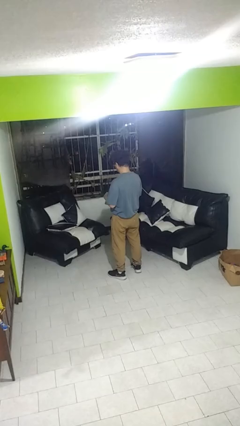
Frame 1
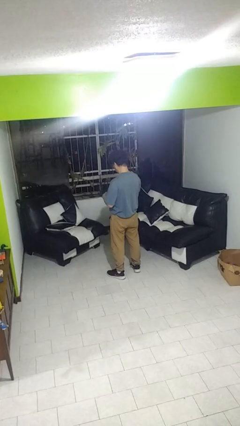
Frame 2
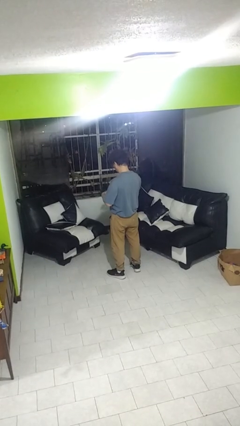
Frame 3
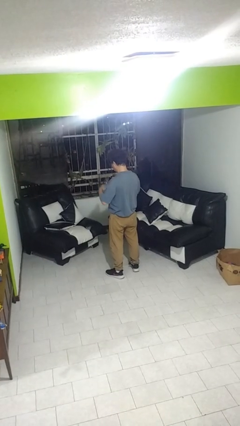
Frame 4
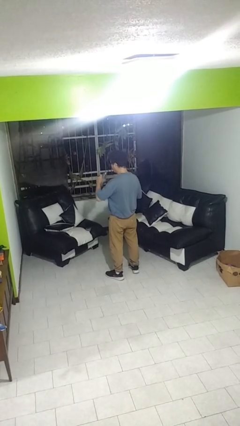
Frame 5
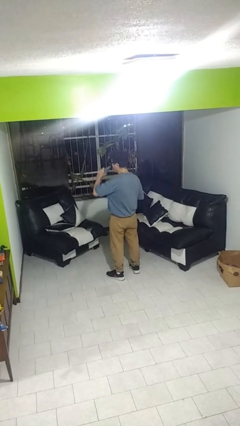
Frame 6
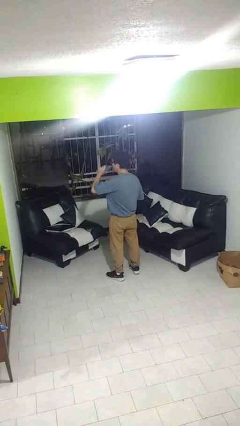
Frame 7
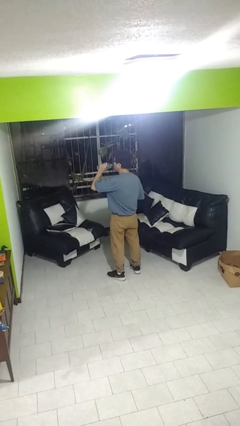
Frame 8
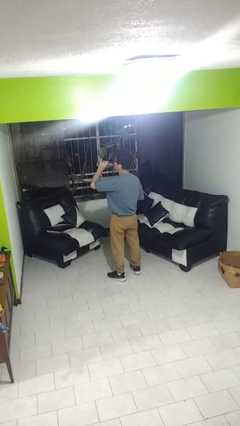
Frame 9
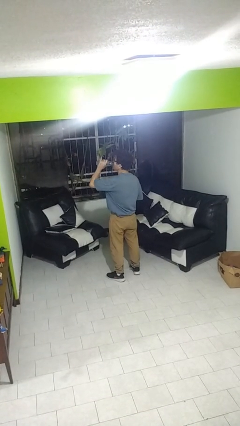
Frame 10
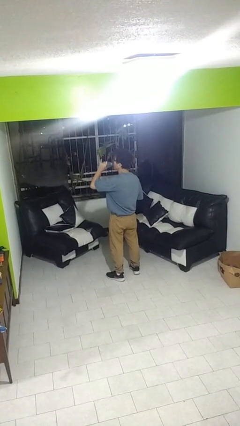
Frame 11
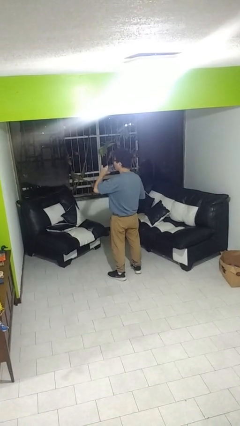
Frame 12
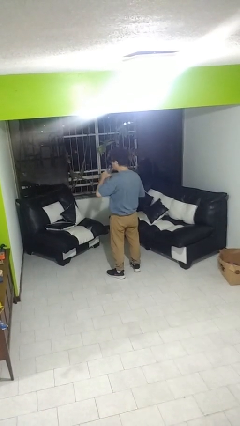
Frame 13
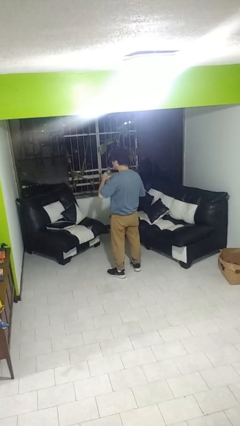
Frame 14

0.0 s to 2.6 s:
person drinks from bottle

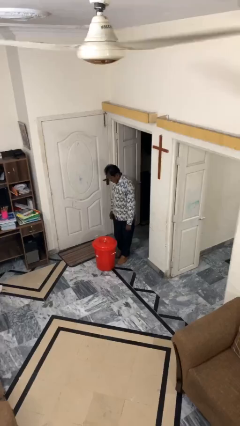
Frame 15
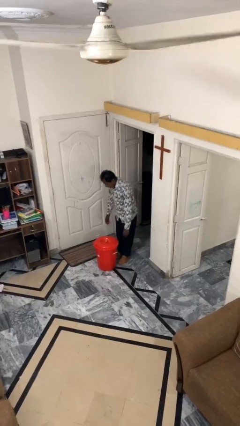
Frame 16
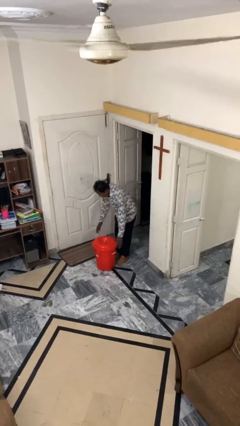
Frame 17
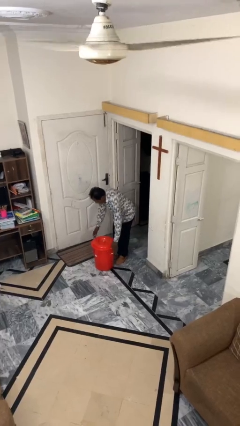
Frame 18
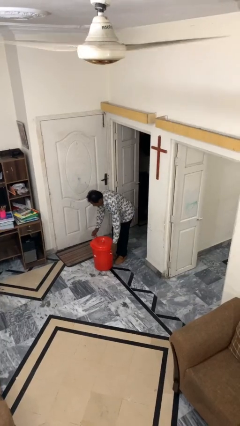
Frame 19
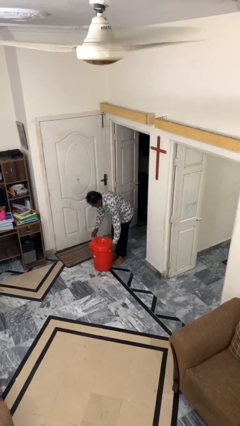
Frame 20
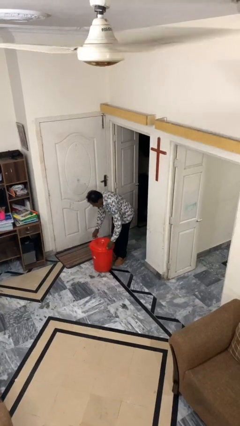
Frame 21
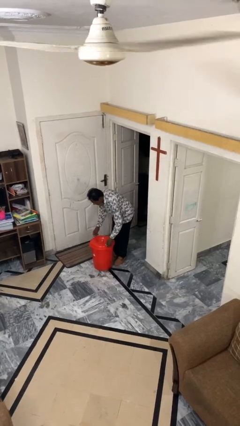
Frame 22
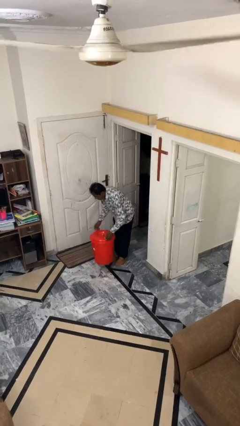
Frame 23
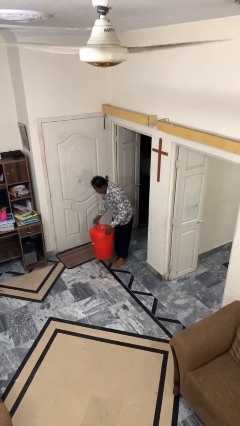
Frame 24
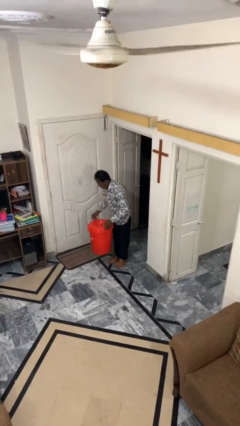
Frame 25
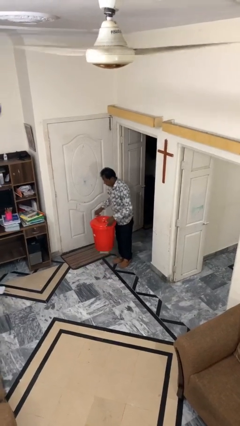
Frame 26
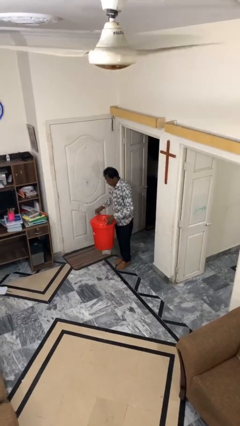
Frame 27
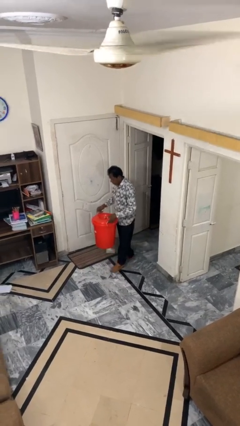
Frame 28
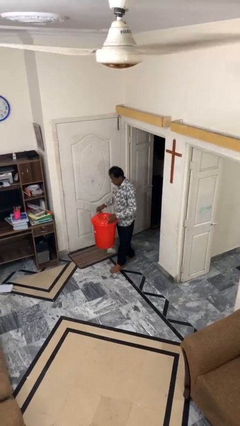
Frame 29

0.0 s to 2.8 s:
person picks up object from floor

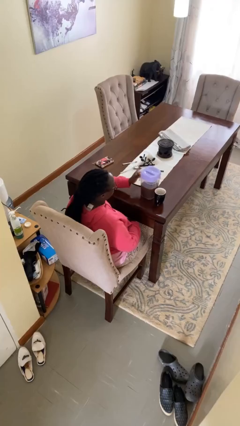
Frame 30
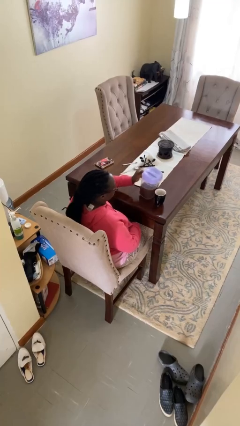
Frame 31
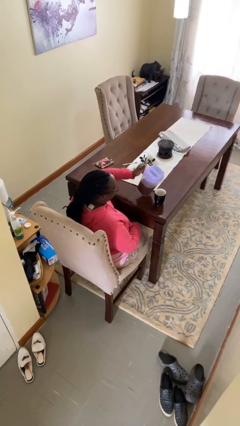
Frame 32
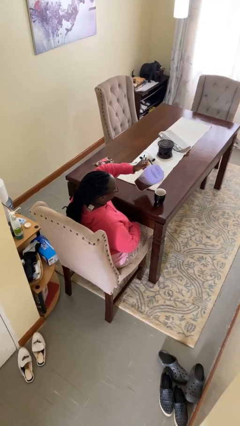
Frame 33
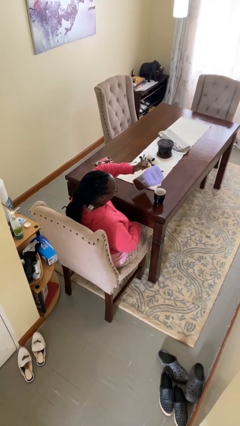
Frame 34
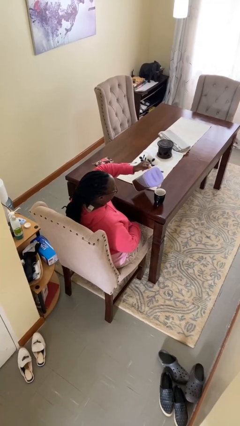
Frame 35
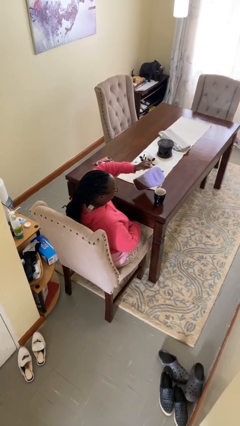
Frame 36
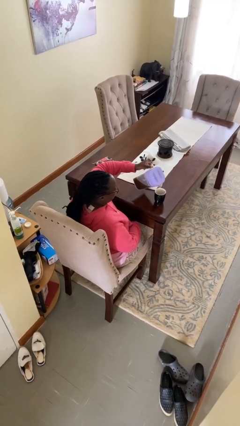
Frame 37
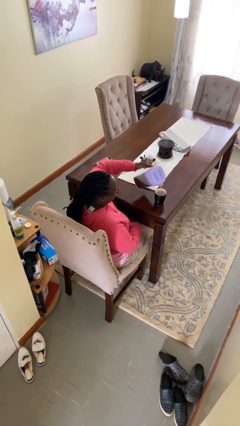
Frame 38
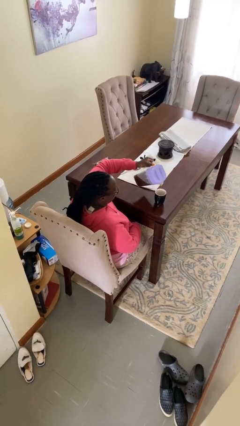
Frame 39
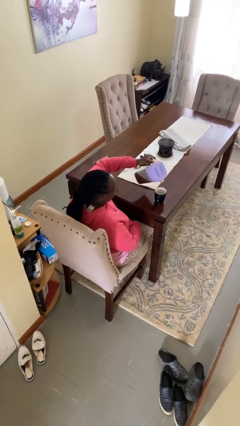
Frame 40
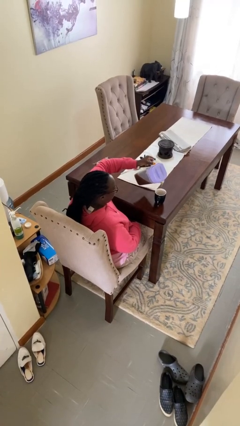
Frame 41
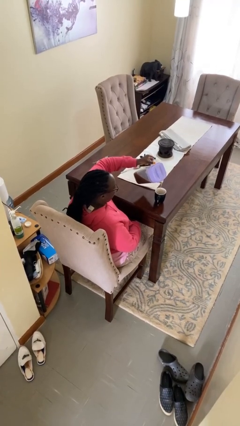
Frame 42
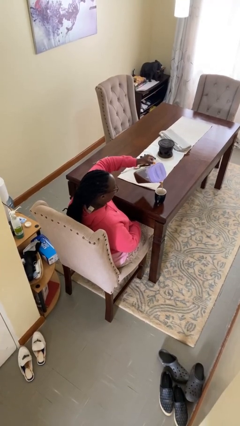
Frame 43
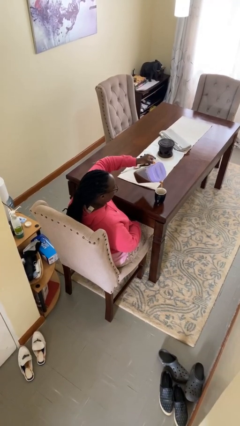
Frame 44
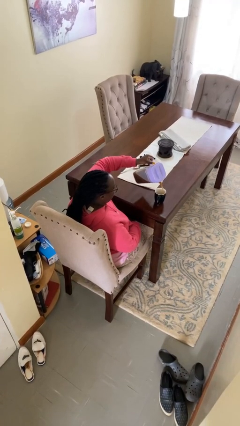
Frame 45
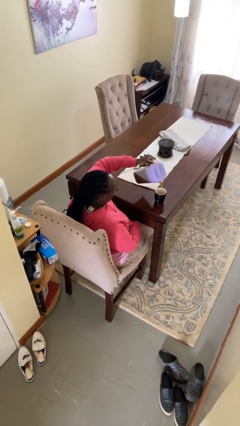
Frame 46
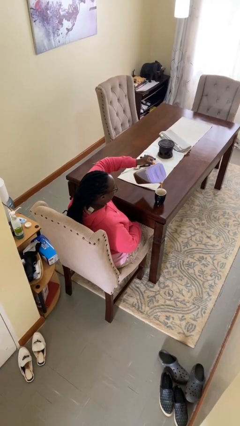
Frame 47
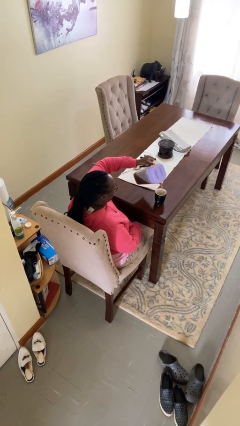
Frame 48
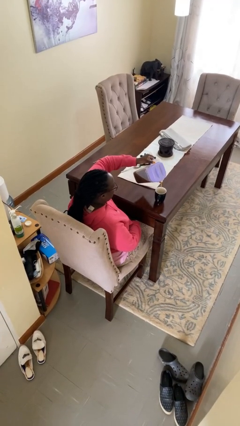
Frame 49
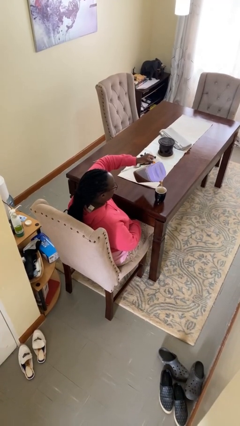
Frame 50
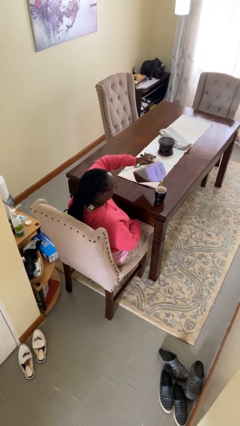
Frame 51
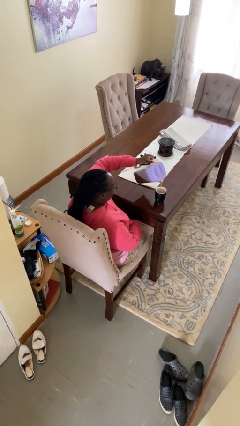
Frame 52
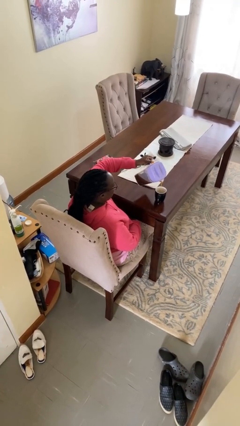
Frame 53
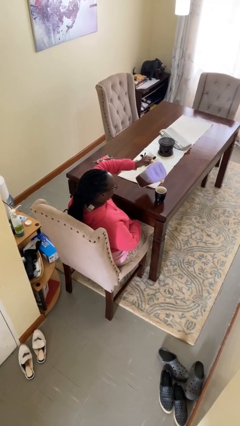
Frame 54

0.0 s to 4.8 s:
person pours coffee into mug

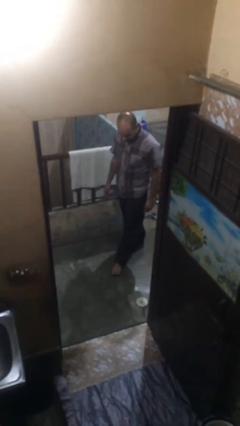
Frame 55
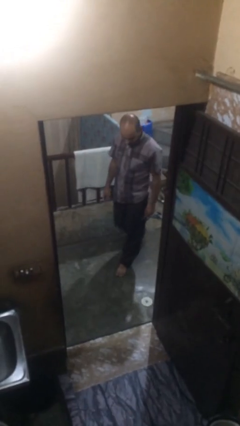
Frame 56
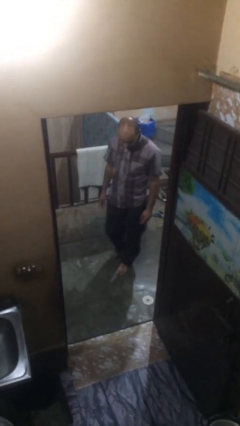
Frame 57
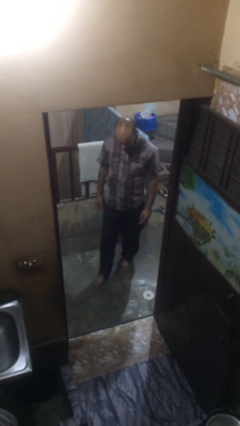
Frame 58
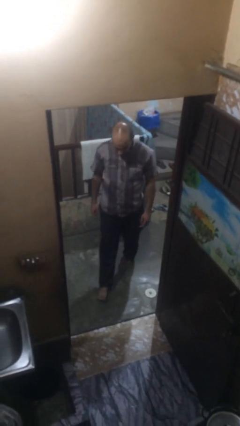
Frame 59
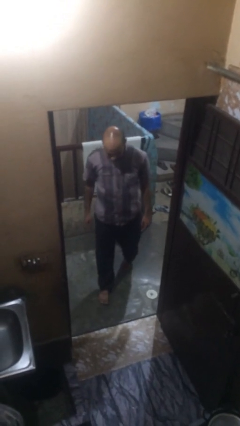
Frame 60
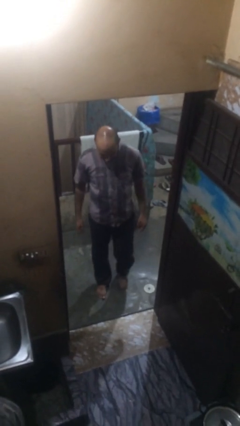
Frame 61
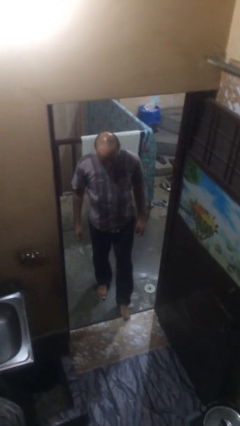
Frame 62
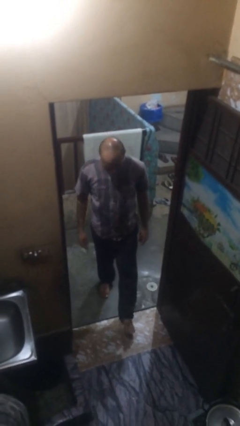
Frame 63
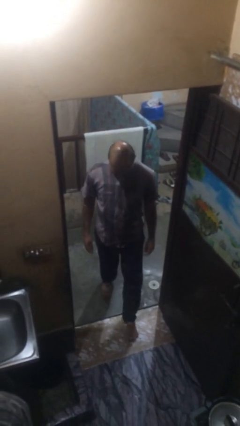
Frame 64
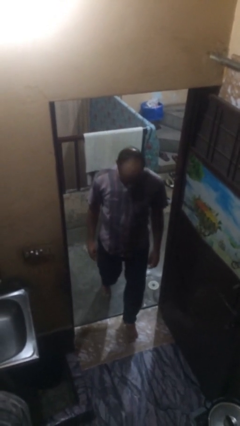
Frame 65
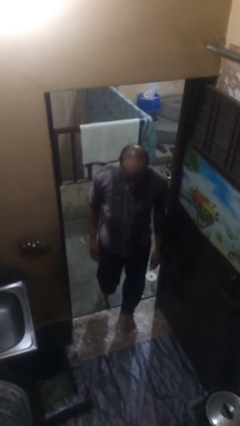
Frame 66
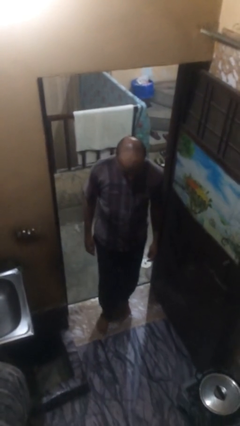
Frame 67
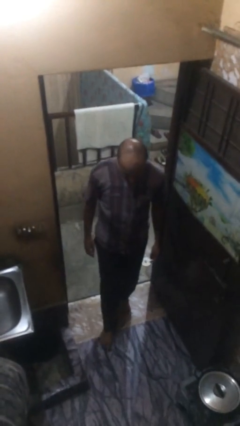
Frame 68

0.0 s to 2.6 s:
person enters scene through structure

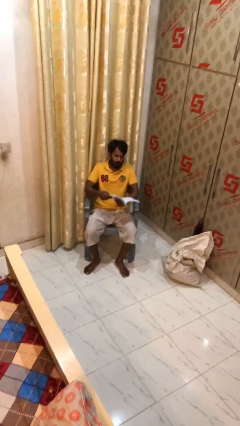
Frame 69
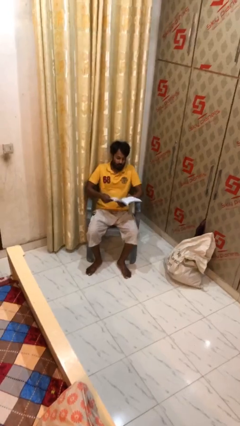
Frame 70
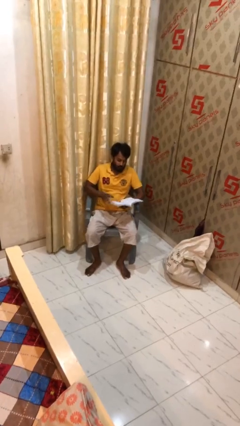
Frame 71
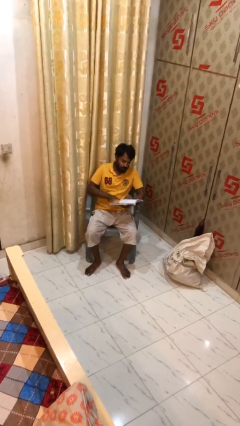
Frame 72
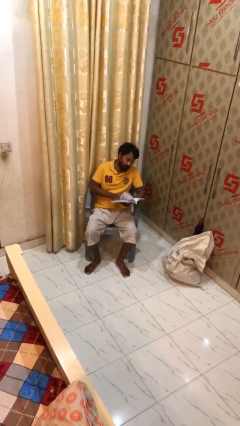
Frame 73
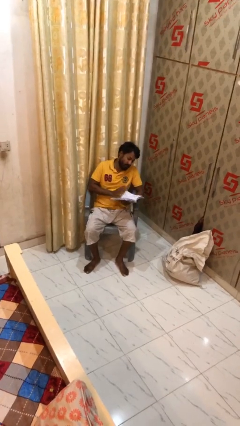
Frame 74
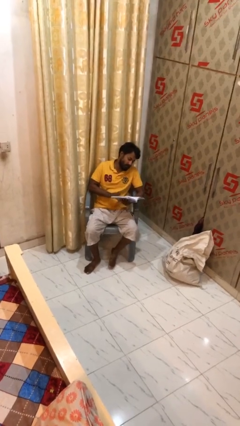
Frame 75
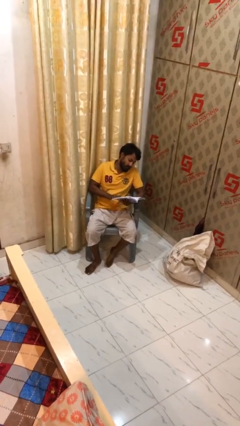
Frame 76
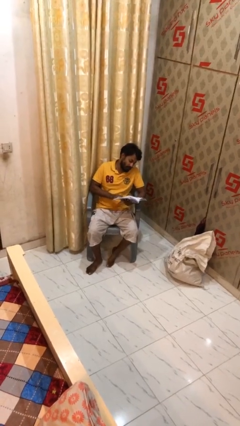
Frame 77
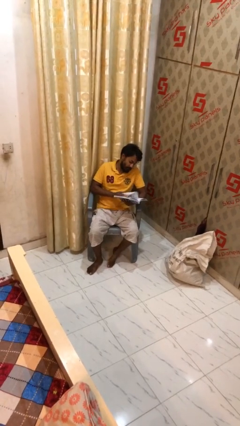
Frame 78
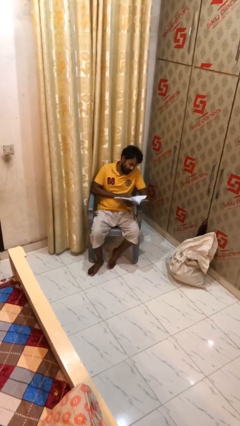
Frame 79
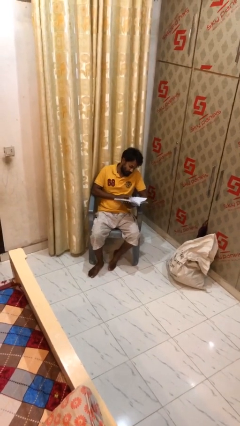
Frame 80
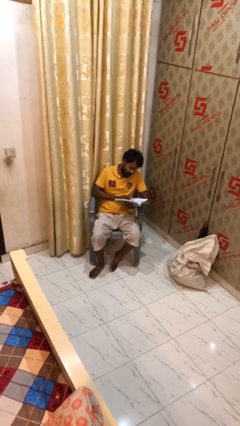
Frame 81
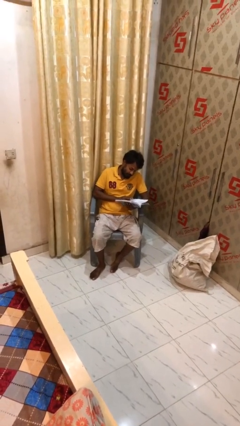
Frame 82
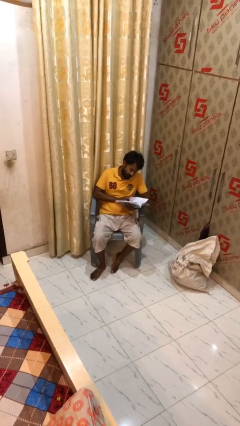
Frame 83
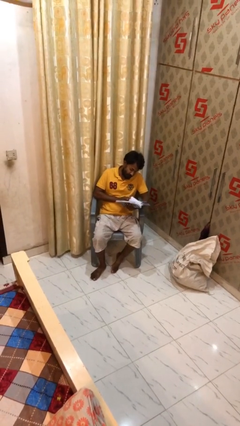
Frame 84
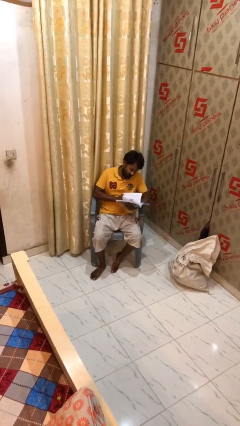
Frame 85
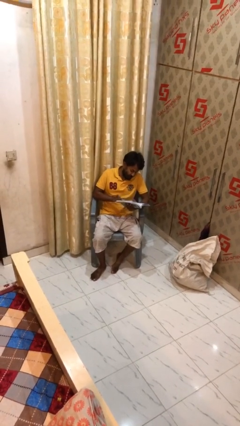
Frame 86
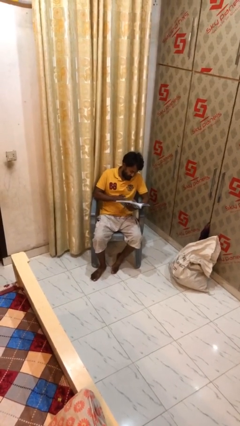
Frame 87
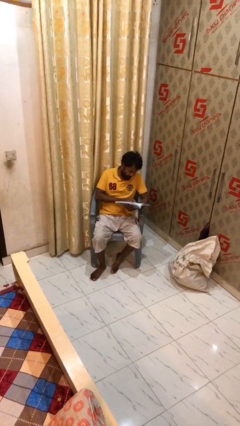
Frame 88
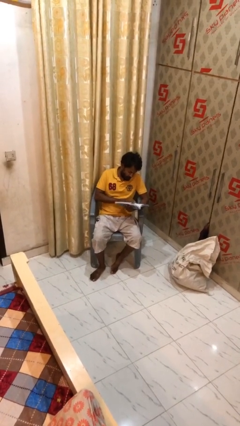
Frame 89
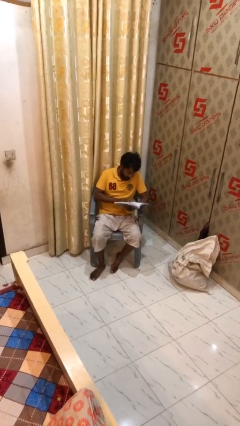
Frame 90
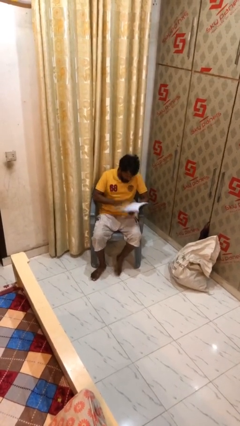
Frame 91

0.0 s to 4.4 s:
person reads document

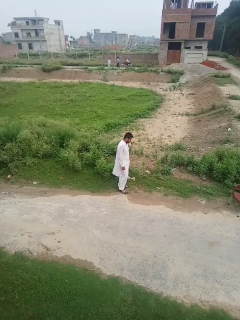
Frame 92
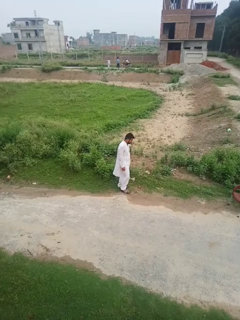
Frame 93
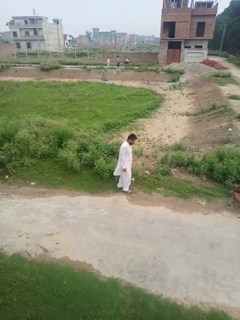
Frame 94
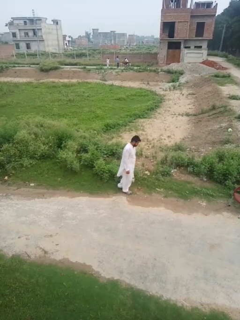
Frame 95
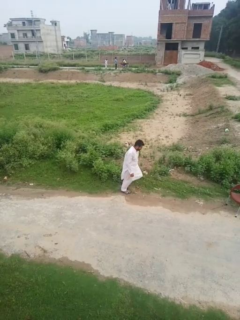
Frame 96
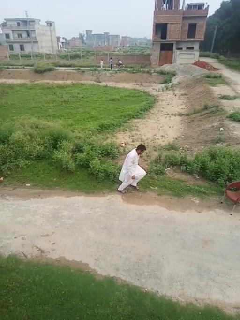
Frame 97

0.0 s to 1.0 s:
person trips on object on floor
